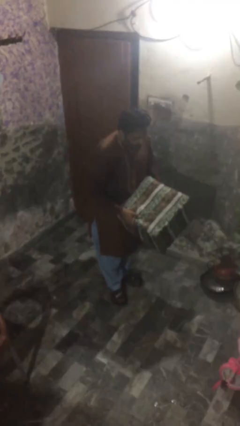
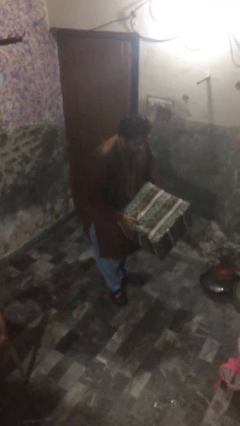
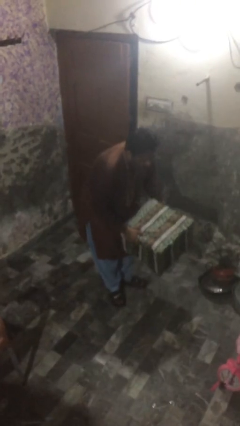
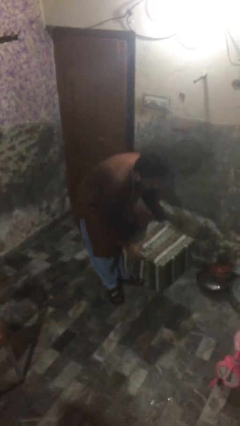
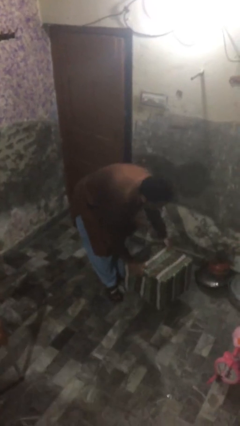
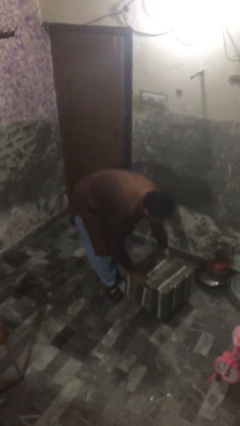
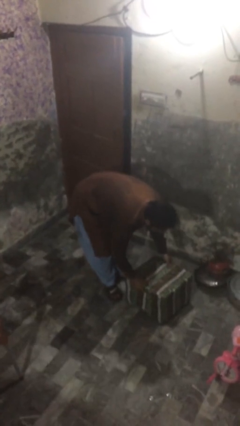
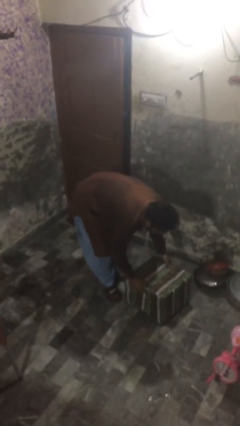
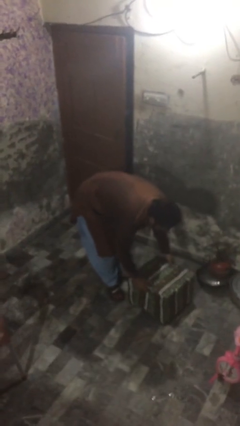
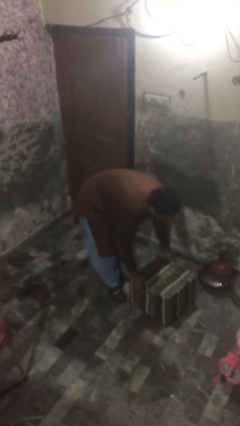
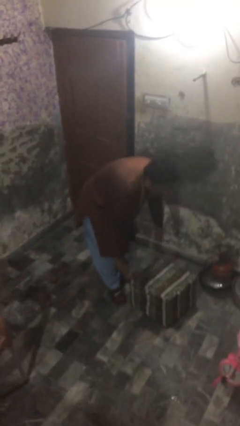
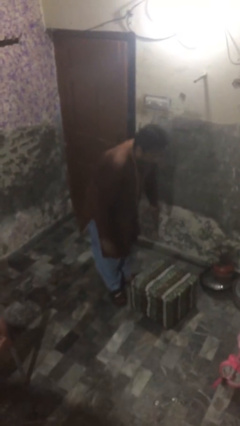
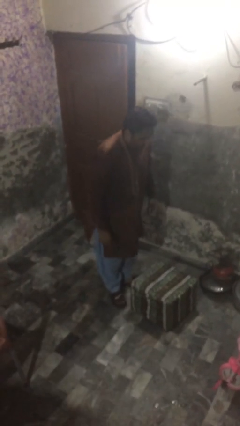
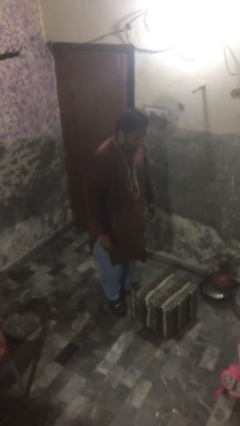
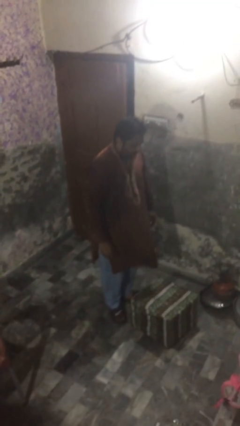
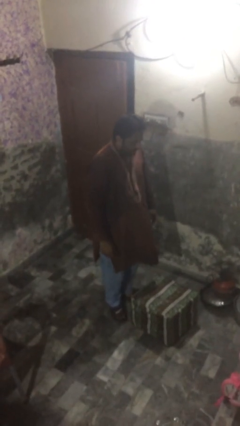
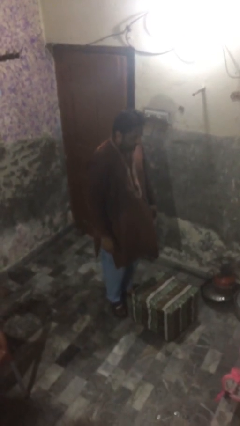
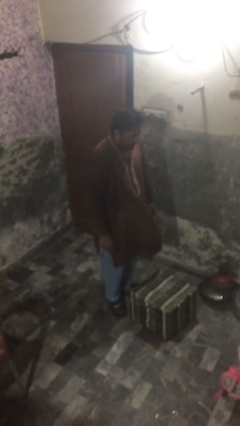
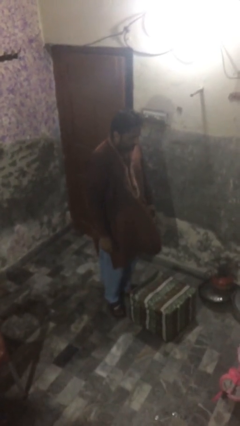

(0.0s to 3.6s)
person puts down object on floor

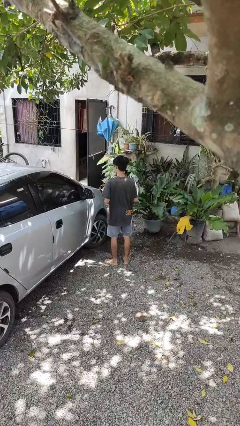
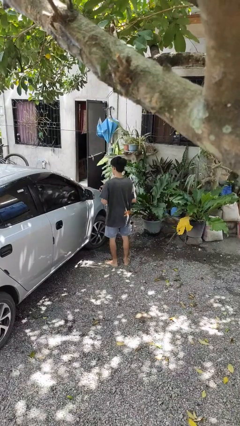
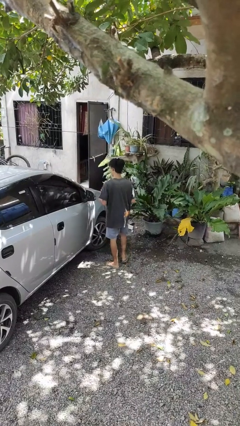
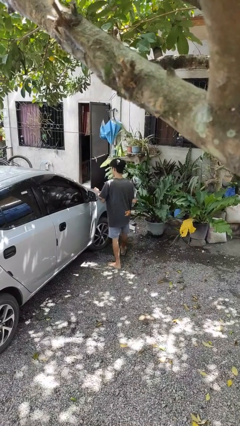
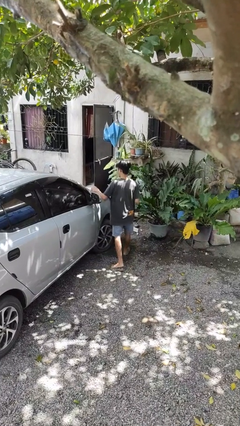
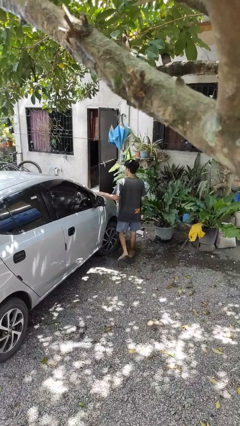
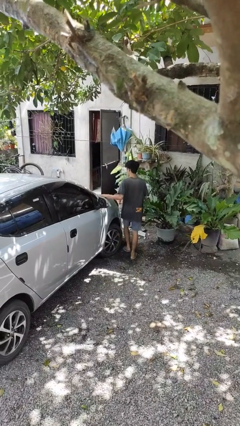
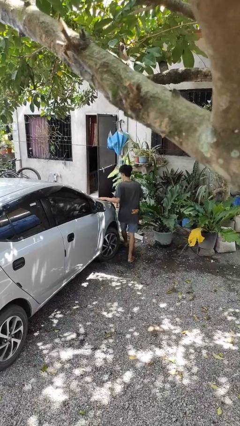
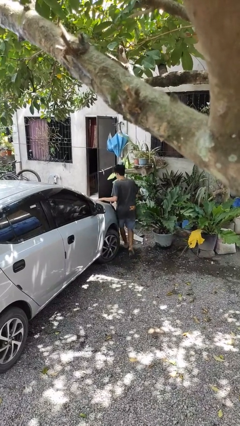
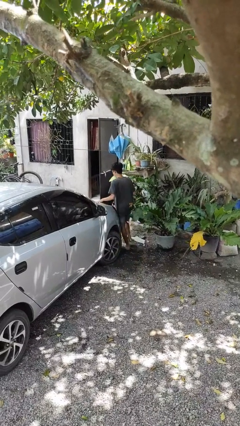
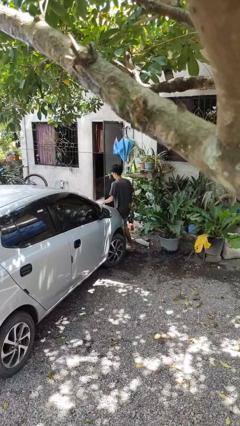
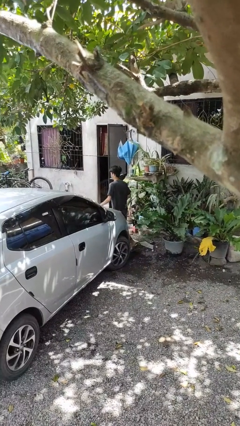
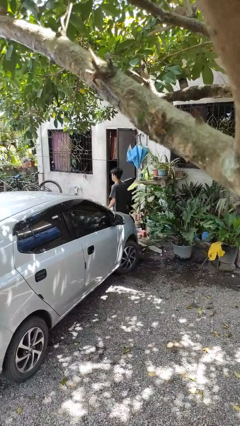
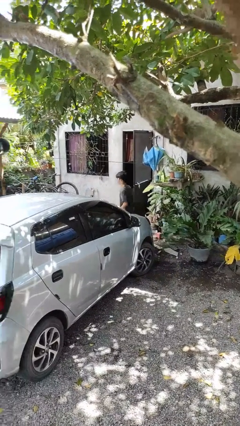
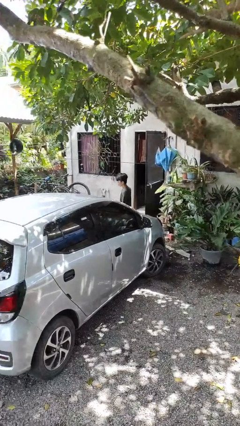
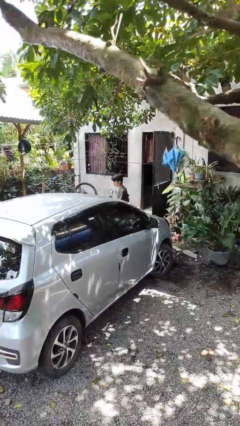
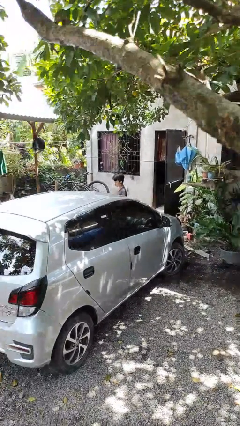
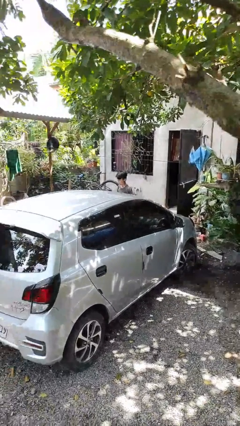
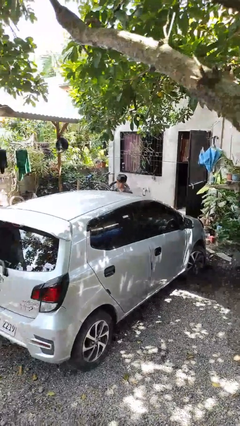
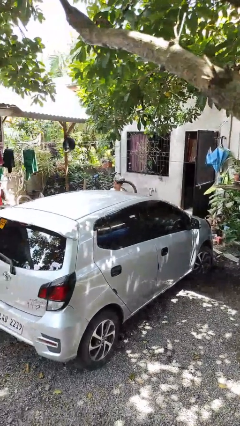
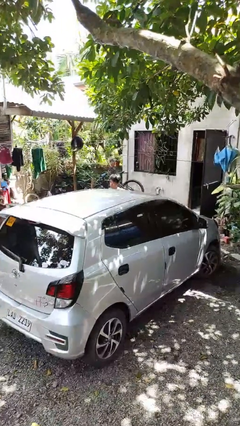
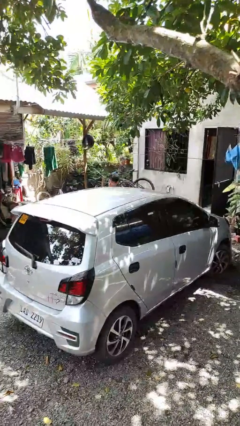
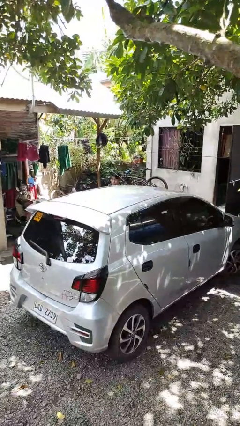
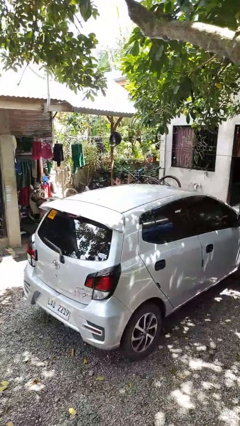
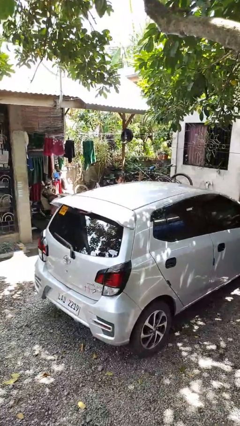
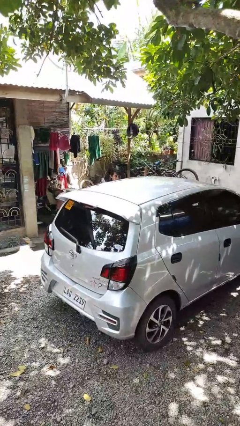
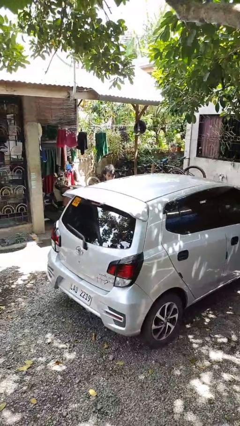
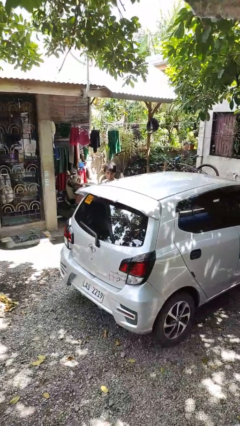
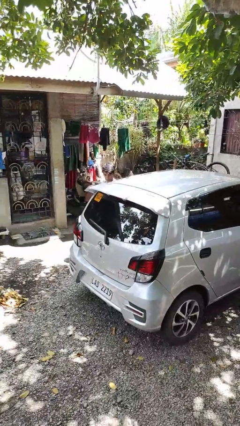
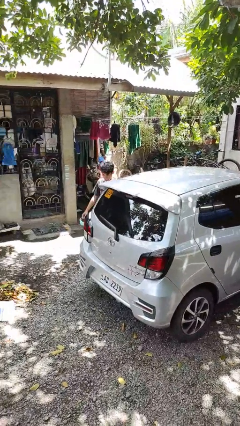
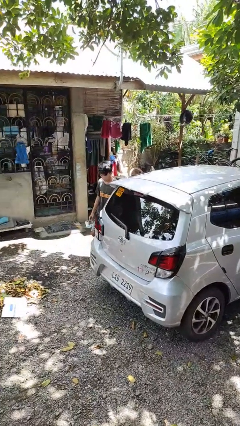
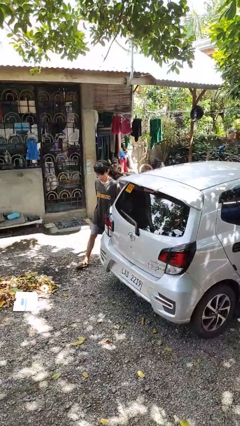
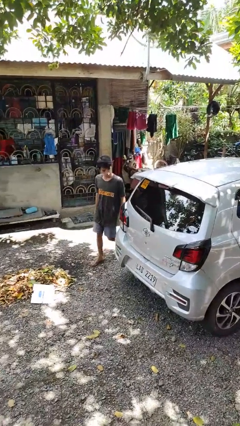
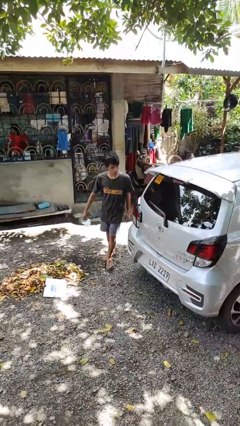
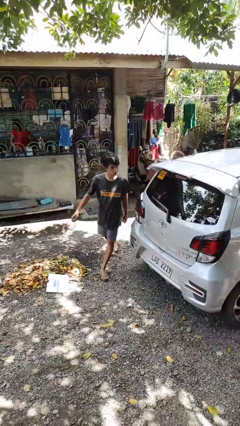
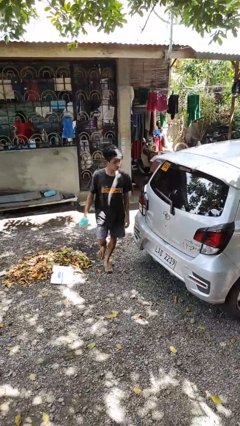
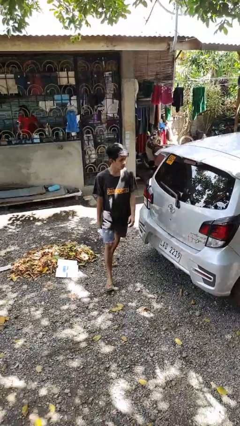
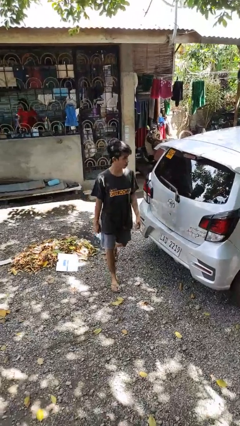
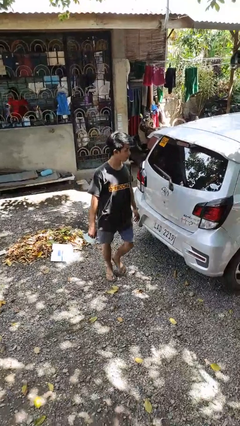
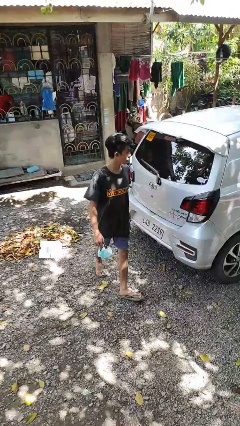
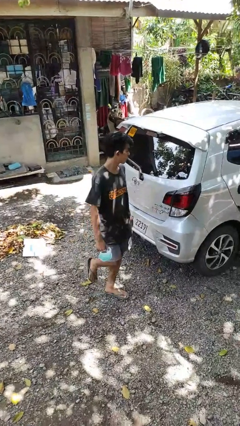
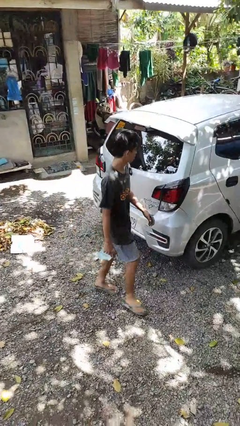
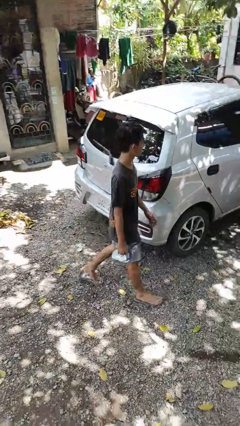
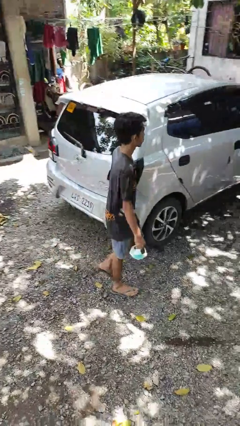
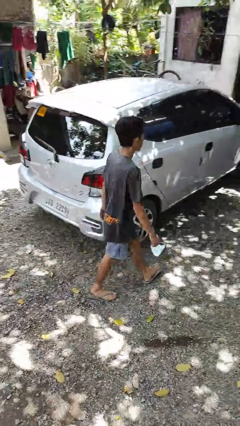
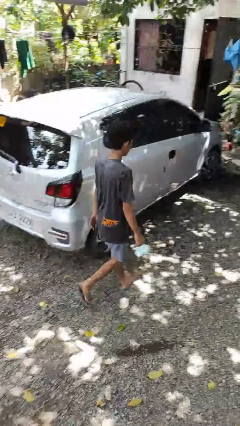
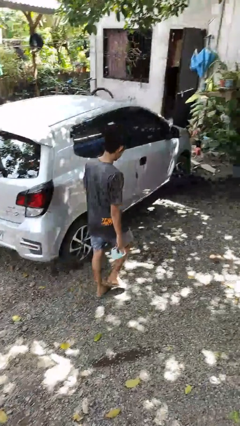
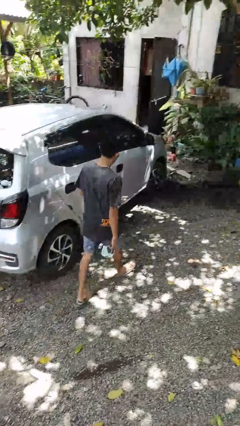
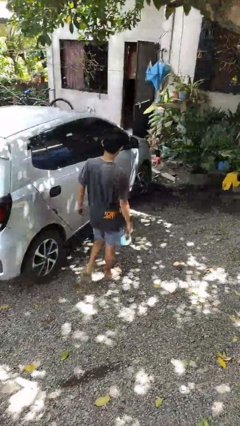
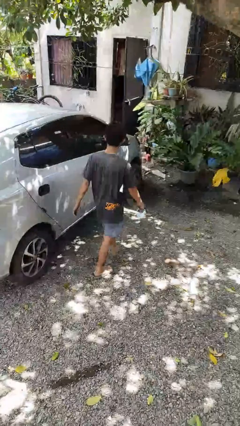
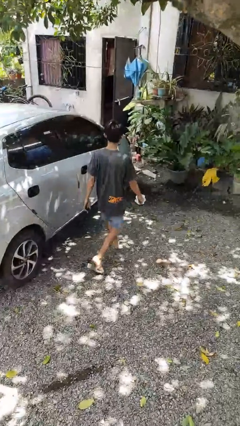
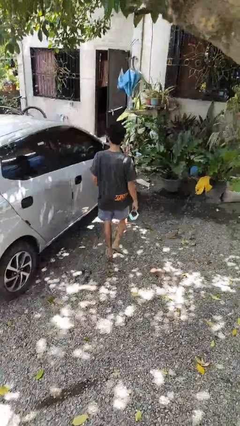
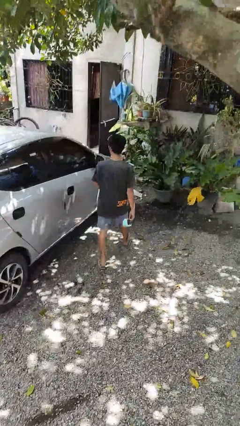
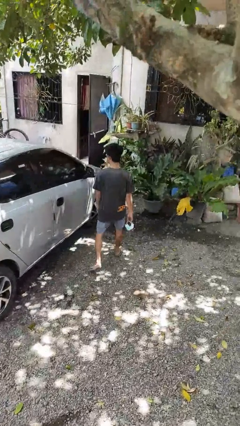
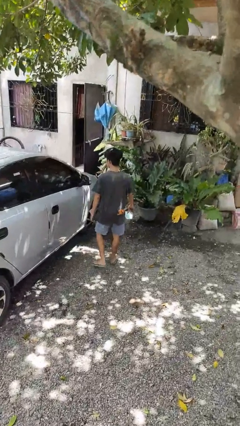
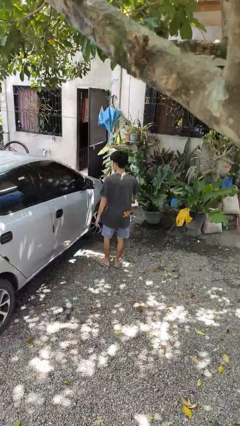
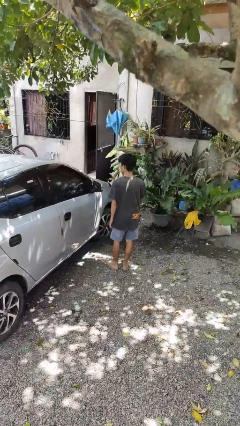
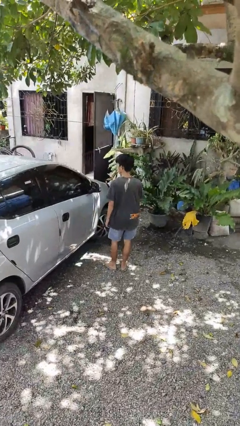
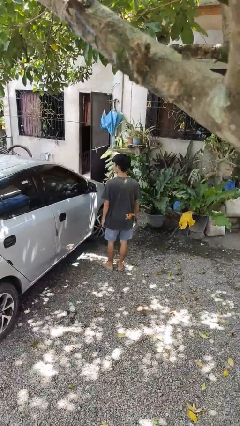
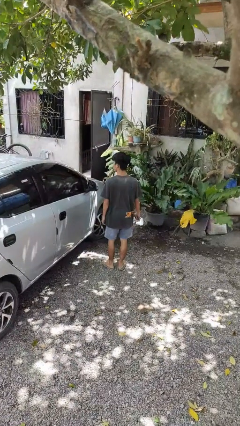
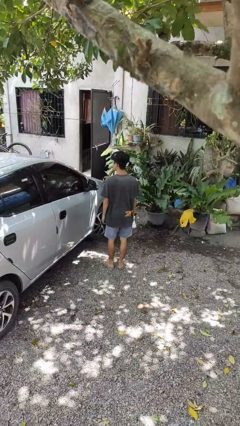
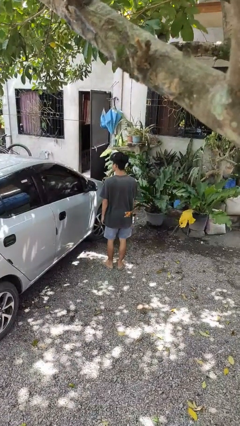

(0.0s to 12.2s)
person walks around car

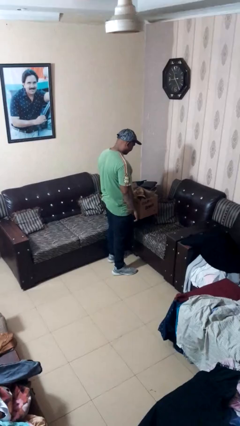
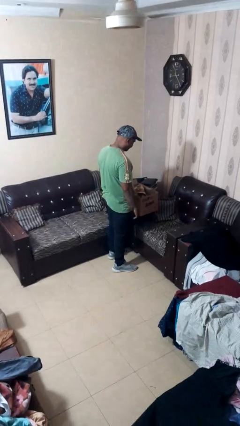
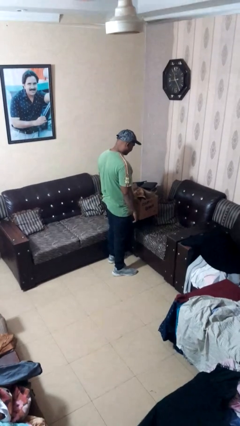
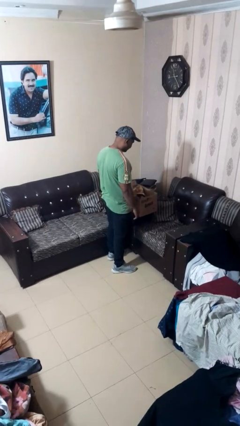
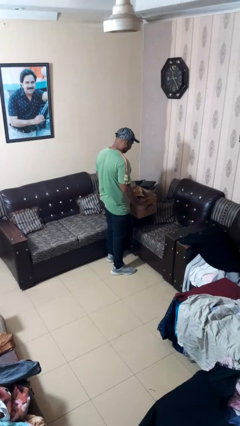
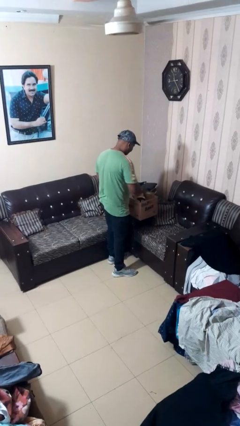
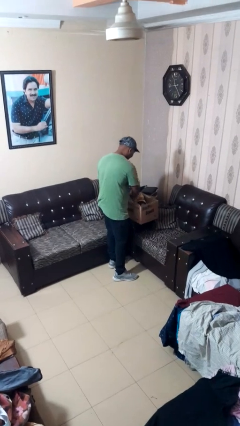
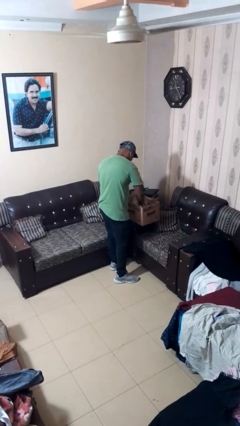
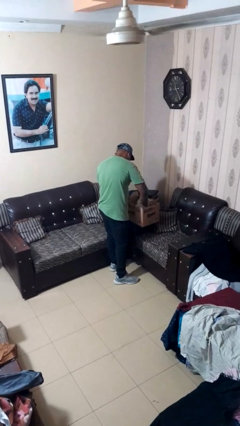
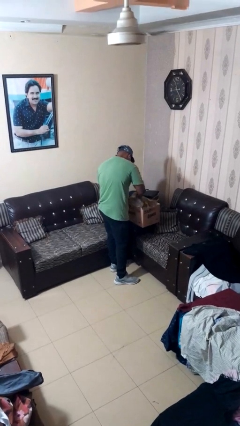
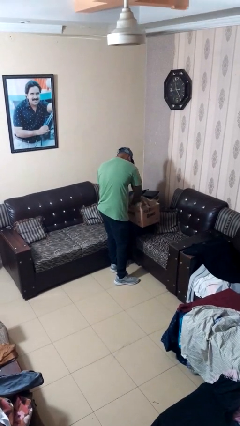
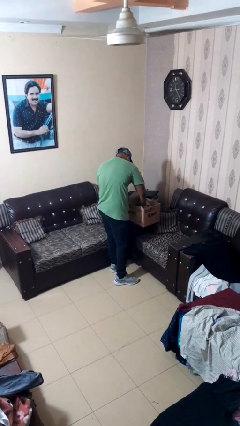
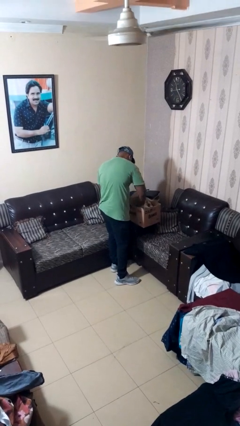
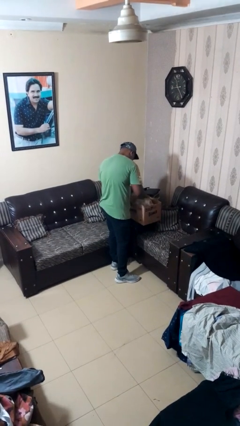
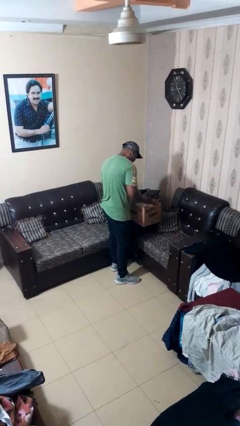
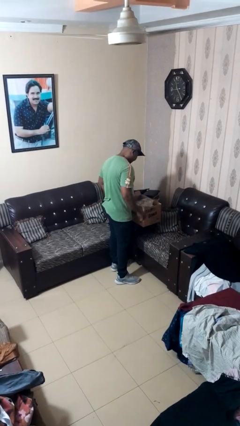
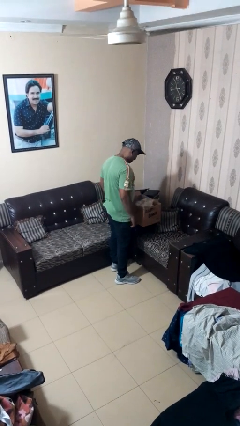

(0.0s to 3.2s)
person searches in box
